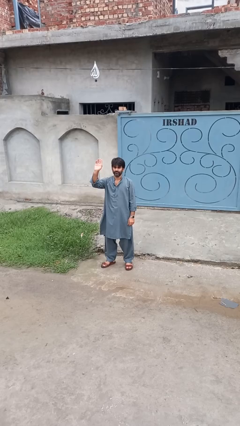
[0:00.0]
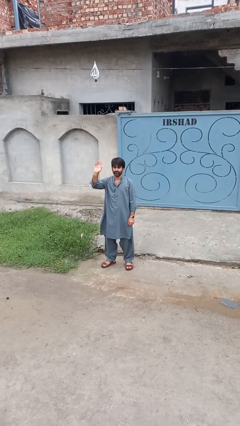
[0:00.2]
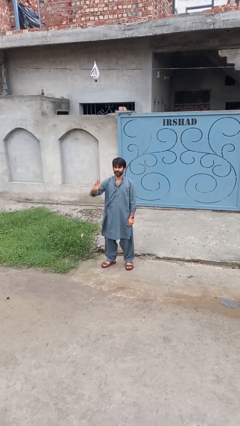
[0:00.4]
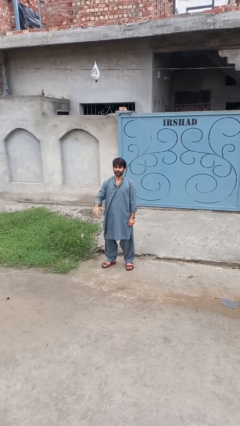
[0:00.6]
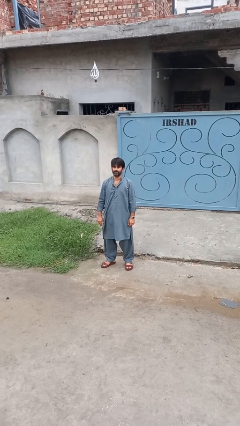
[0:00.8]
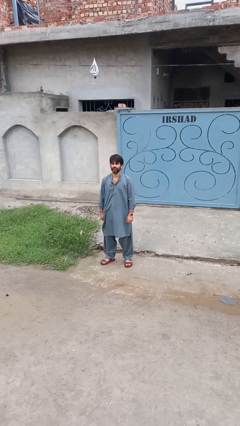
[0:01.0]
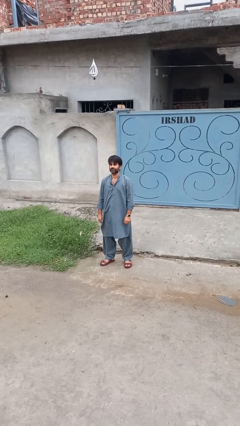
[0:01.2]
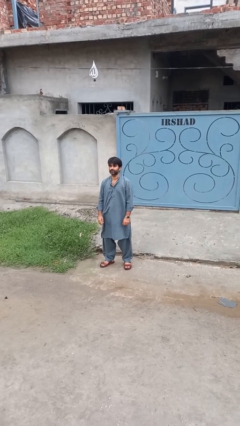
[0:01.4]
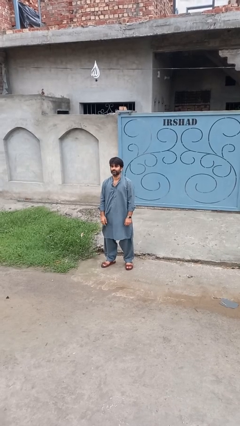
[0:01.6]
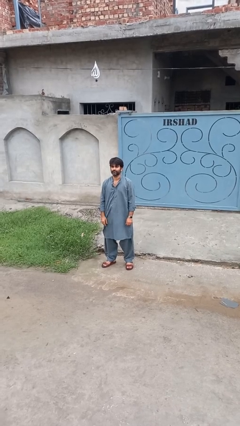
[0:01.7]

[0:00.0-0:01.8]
person gestures lower hand

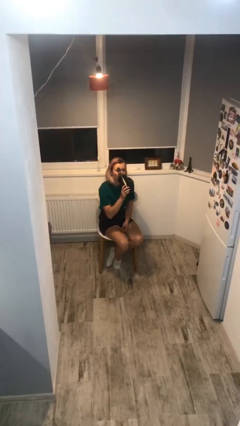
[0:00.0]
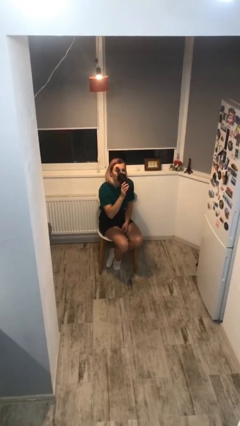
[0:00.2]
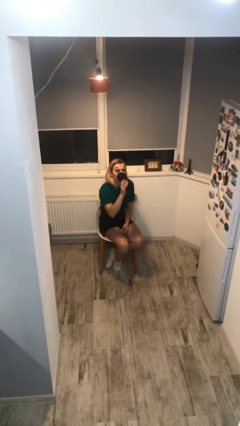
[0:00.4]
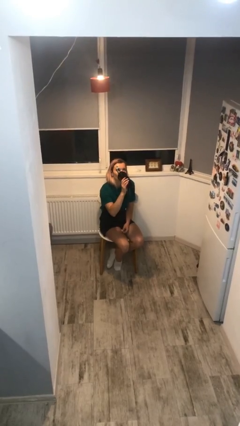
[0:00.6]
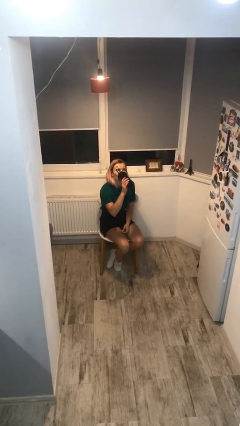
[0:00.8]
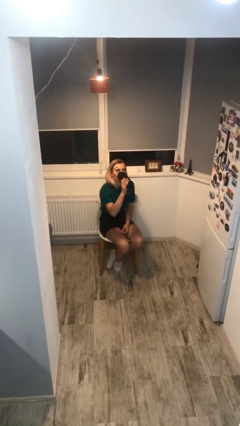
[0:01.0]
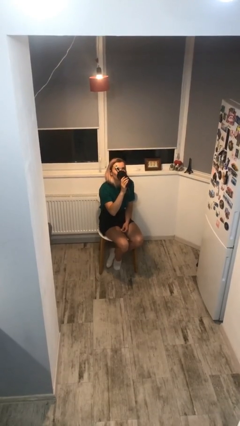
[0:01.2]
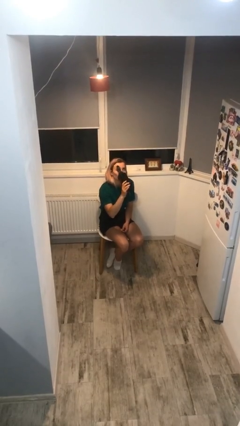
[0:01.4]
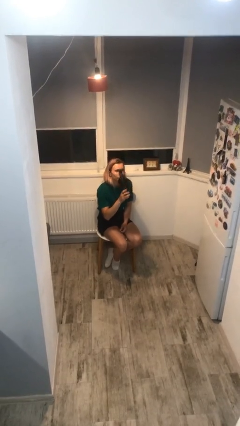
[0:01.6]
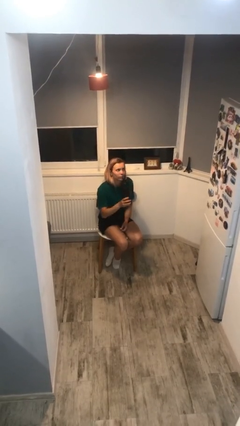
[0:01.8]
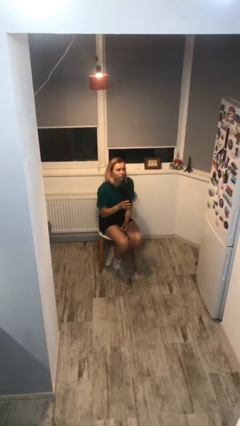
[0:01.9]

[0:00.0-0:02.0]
person drinks from bottle

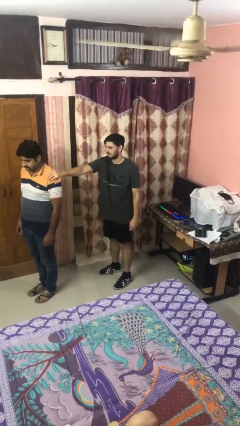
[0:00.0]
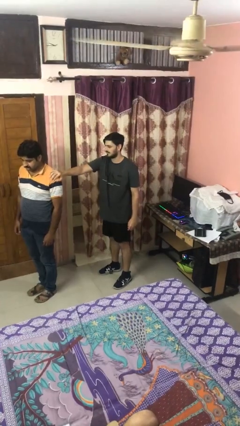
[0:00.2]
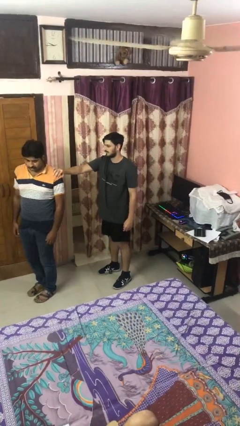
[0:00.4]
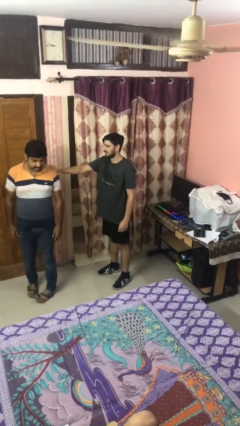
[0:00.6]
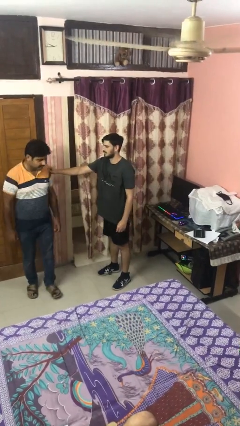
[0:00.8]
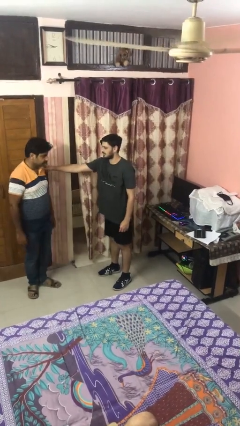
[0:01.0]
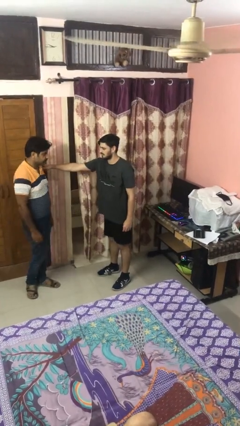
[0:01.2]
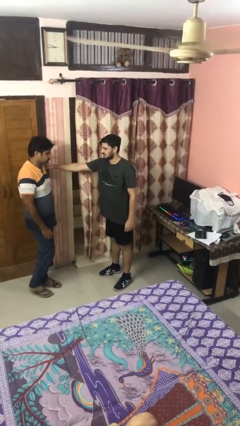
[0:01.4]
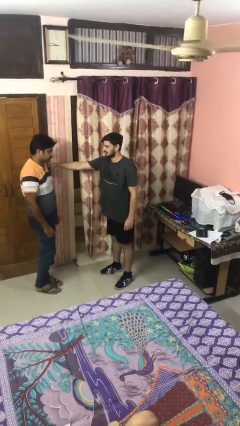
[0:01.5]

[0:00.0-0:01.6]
person spins person around

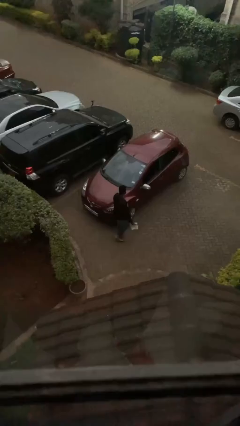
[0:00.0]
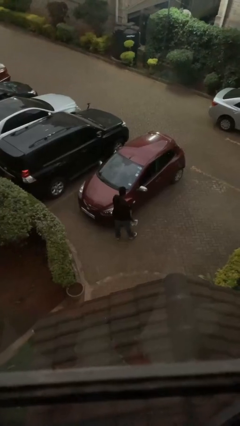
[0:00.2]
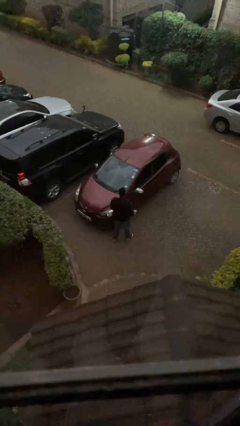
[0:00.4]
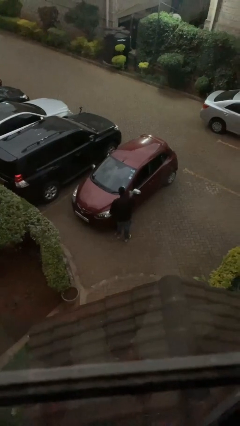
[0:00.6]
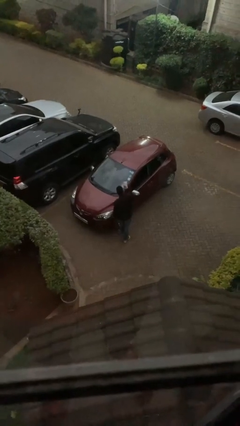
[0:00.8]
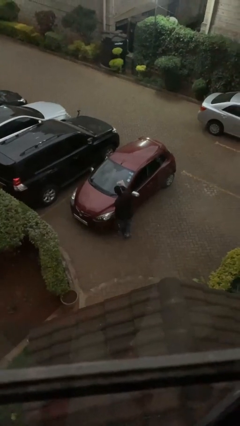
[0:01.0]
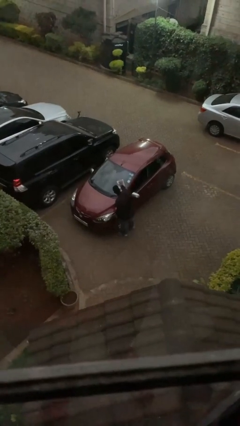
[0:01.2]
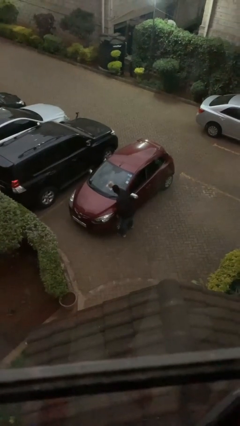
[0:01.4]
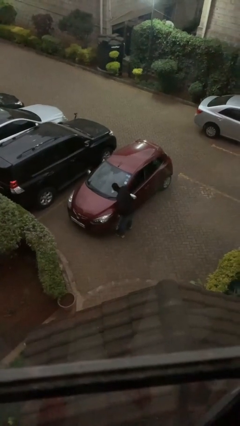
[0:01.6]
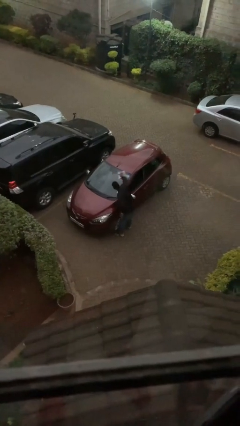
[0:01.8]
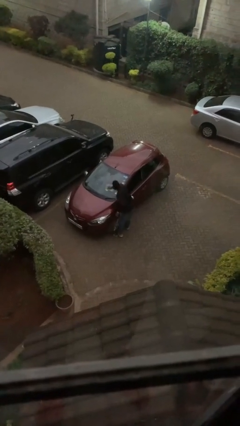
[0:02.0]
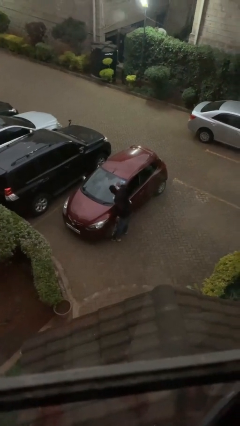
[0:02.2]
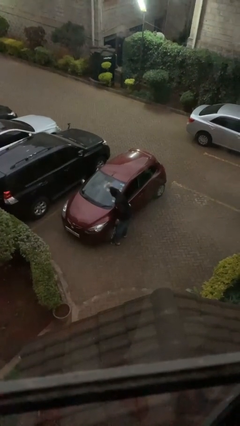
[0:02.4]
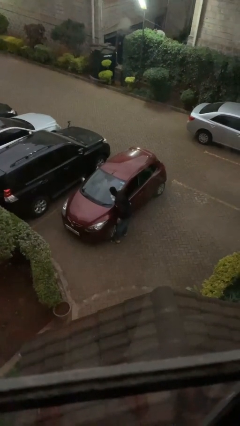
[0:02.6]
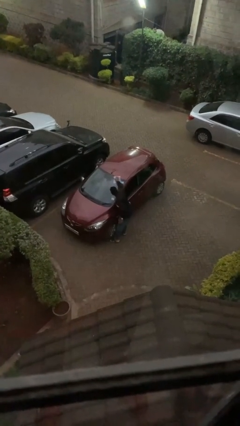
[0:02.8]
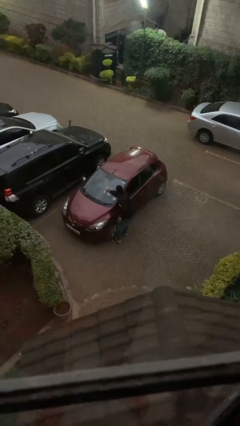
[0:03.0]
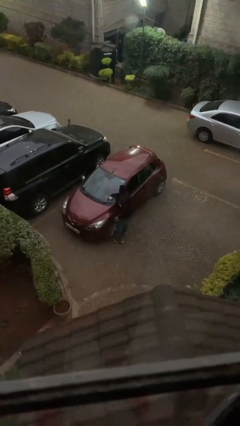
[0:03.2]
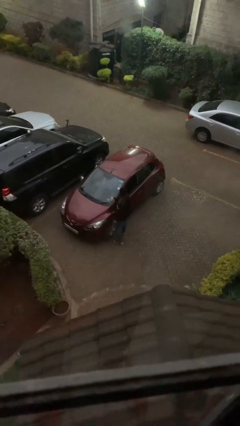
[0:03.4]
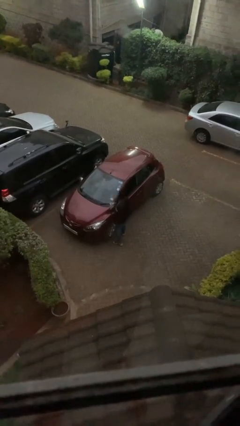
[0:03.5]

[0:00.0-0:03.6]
person polishes car with rag

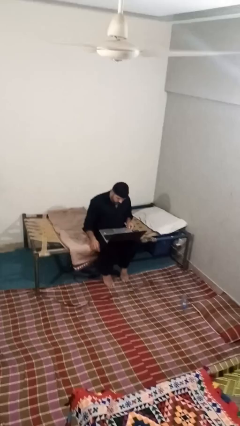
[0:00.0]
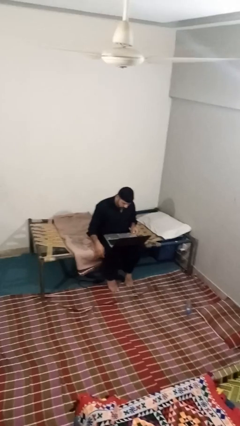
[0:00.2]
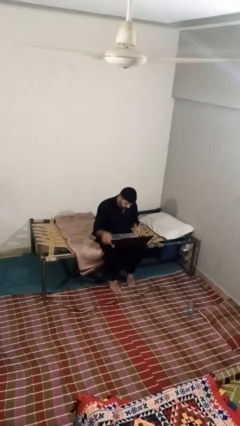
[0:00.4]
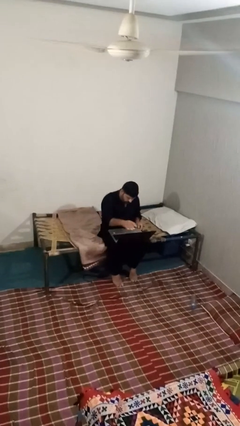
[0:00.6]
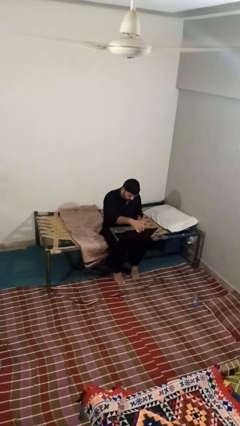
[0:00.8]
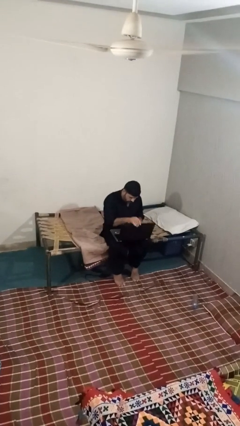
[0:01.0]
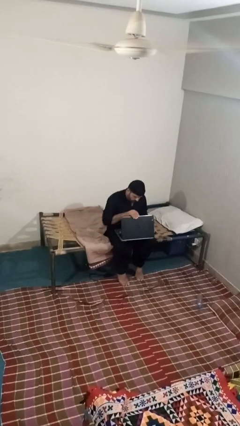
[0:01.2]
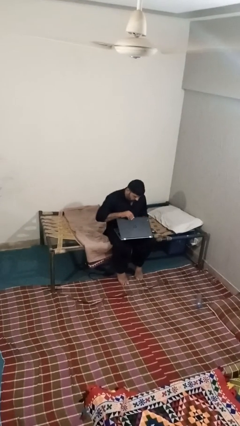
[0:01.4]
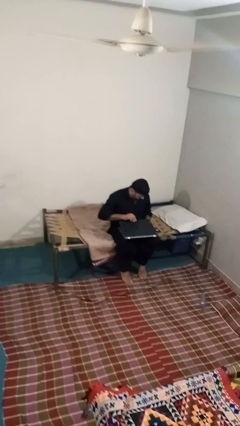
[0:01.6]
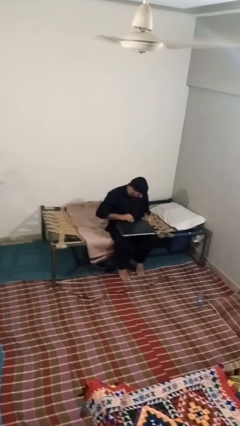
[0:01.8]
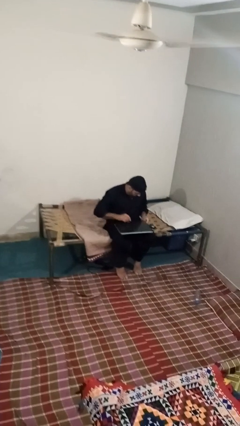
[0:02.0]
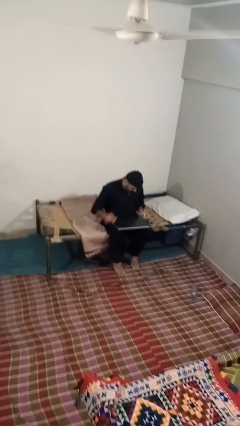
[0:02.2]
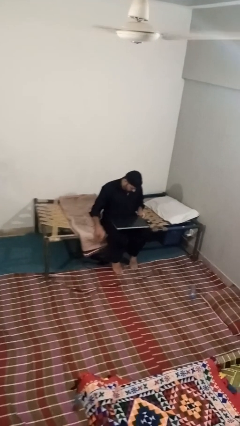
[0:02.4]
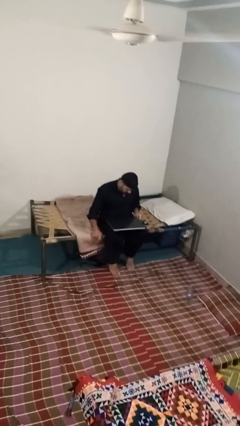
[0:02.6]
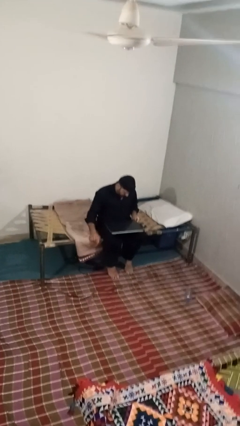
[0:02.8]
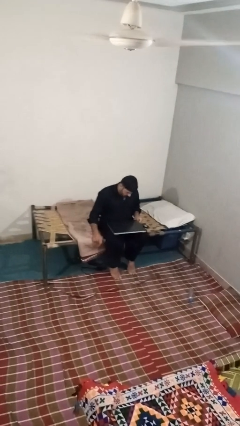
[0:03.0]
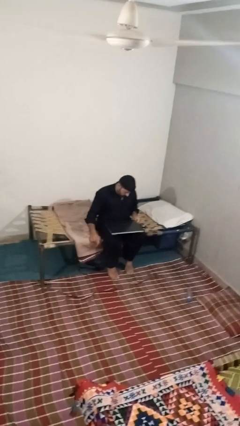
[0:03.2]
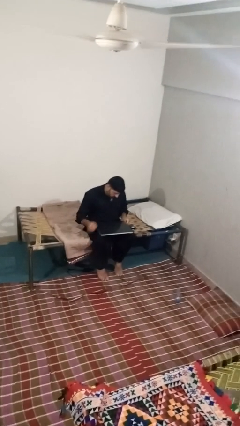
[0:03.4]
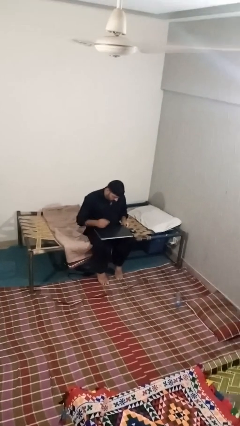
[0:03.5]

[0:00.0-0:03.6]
person closes laptop

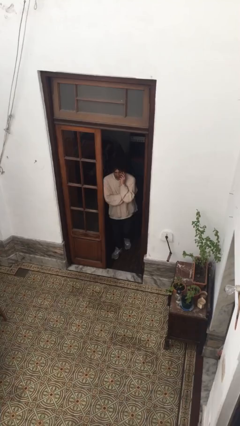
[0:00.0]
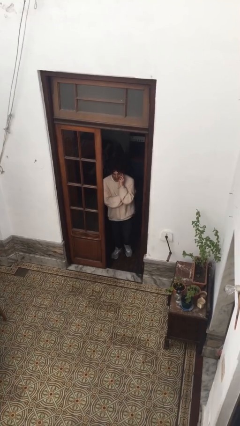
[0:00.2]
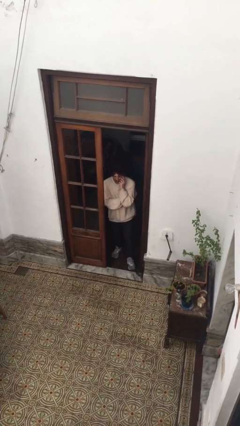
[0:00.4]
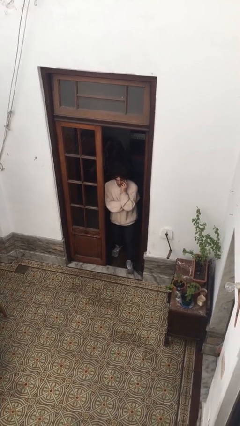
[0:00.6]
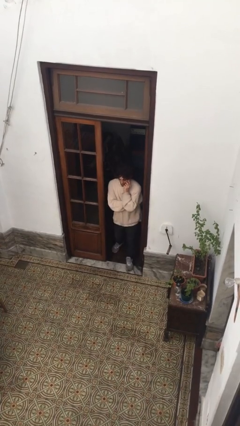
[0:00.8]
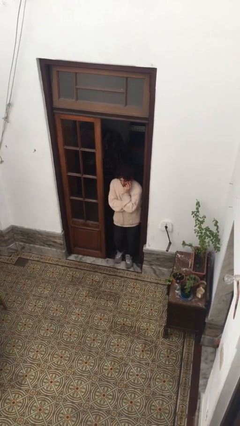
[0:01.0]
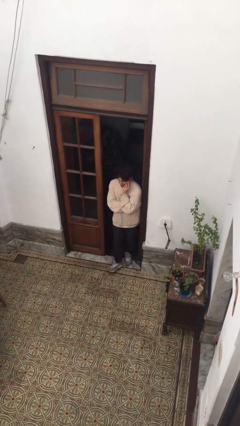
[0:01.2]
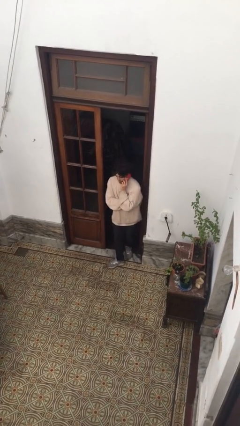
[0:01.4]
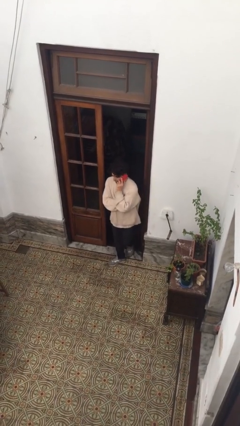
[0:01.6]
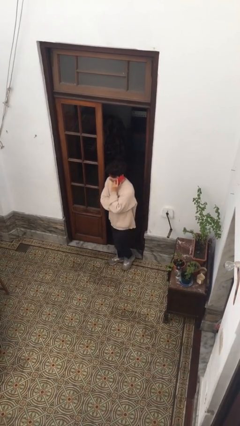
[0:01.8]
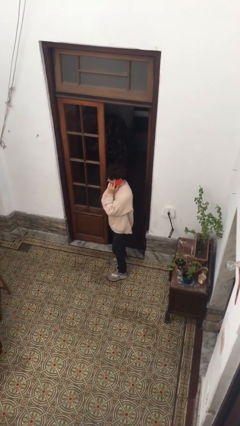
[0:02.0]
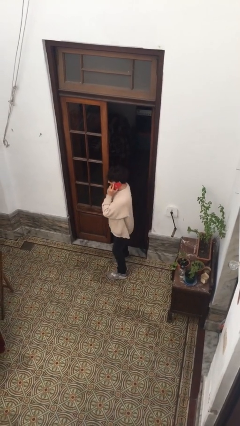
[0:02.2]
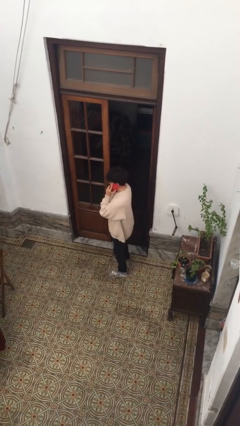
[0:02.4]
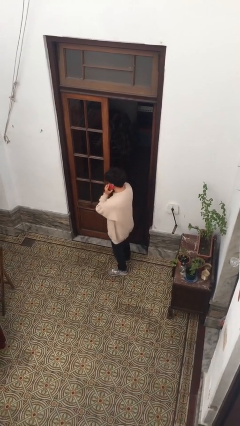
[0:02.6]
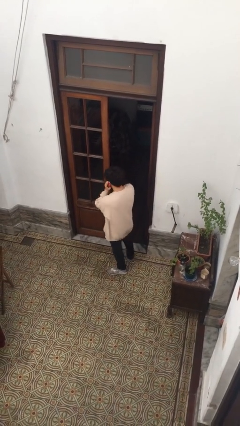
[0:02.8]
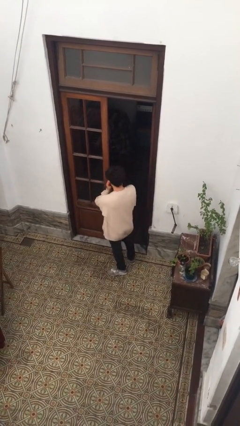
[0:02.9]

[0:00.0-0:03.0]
person enters scene through structure

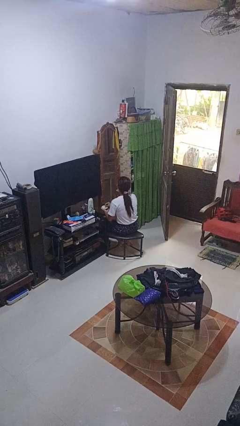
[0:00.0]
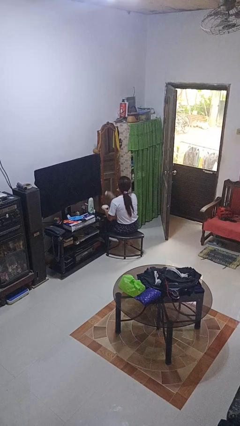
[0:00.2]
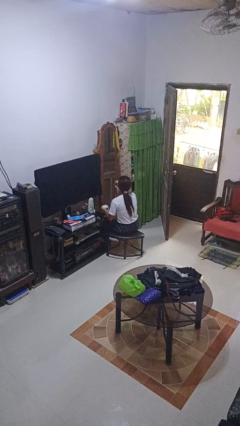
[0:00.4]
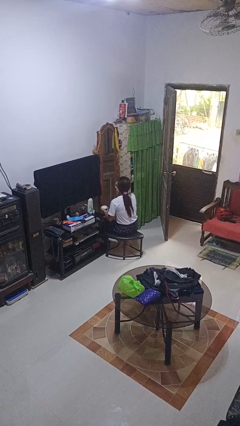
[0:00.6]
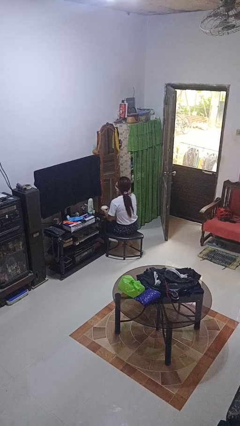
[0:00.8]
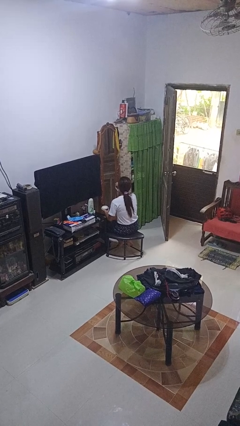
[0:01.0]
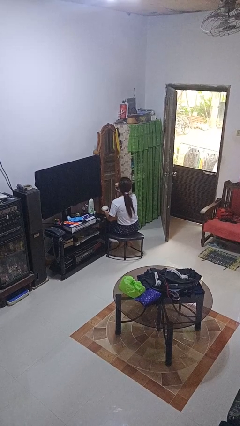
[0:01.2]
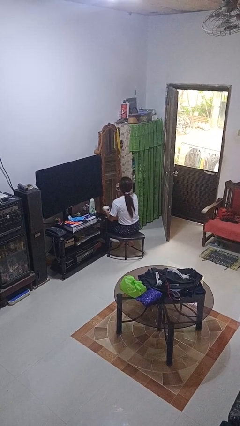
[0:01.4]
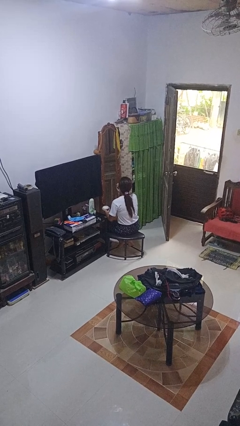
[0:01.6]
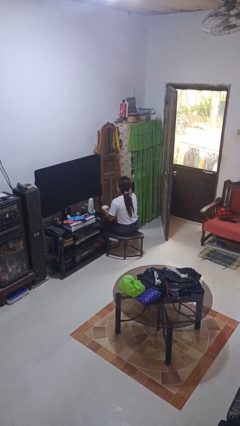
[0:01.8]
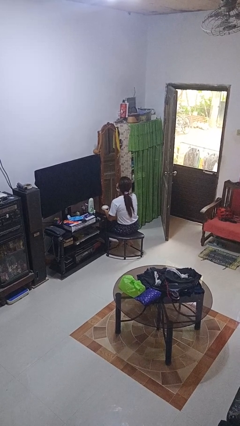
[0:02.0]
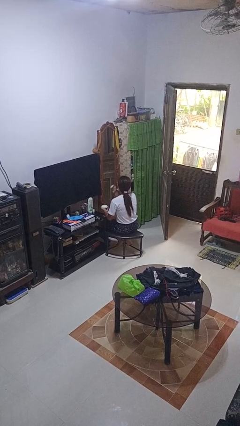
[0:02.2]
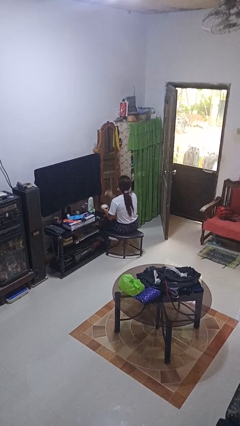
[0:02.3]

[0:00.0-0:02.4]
person applies foundation makeup
